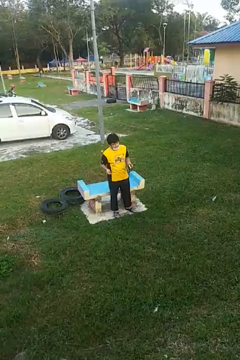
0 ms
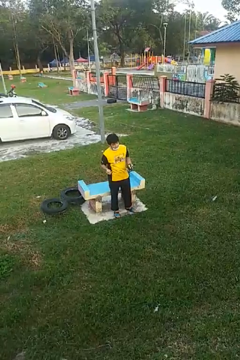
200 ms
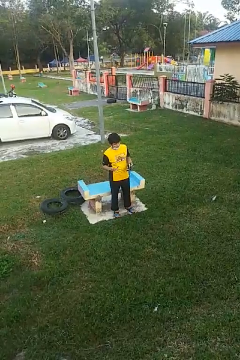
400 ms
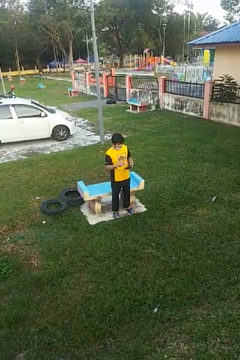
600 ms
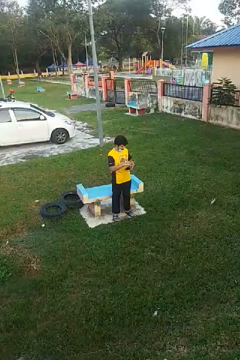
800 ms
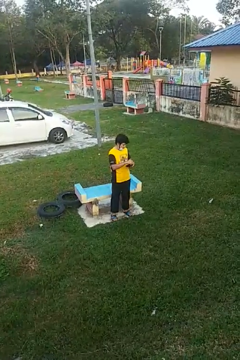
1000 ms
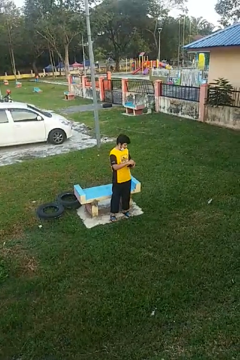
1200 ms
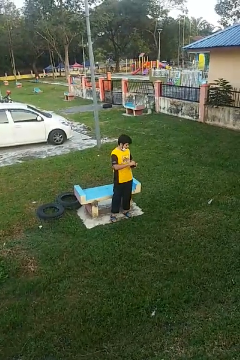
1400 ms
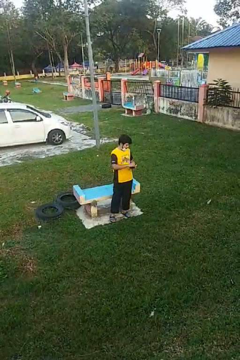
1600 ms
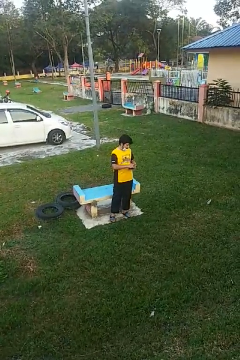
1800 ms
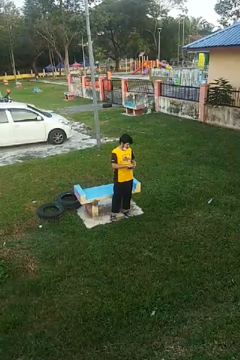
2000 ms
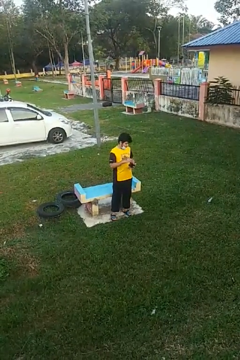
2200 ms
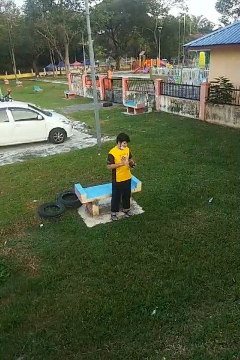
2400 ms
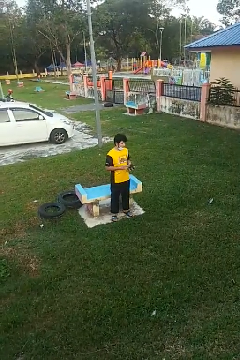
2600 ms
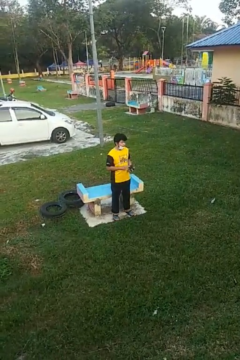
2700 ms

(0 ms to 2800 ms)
person puts object into purse

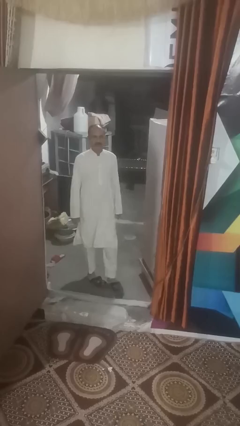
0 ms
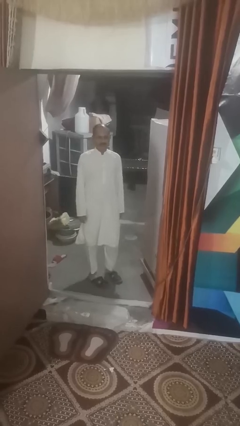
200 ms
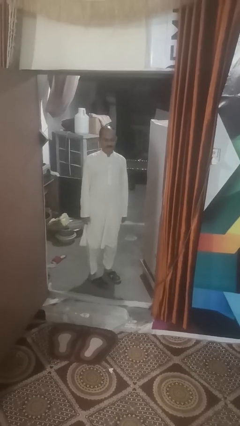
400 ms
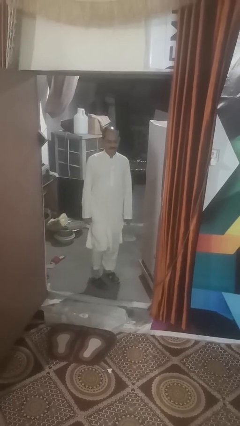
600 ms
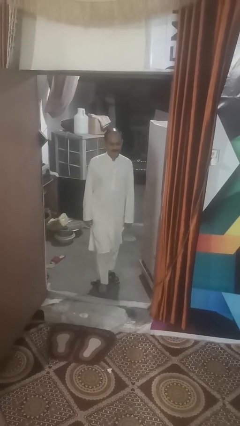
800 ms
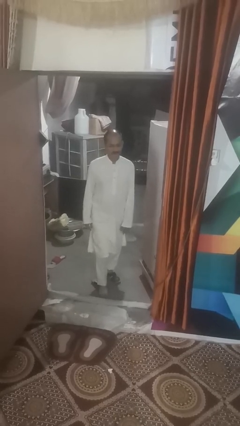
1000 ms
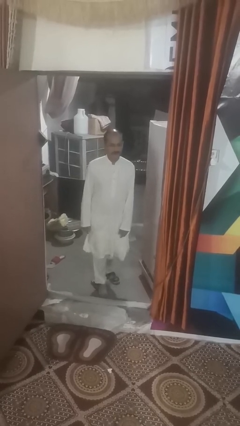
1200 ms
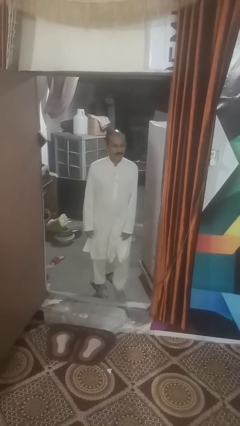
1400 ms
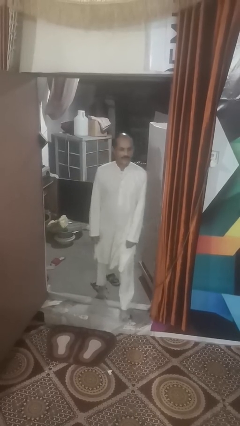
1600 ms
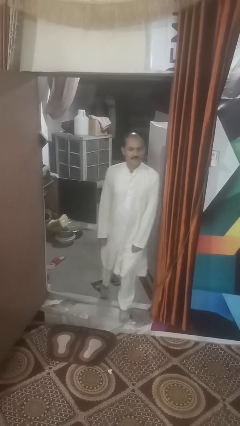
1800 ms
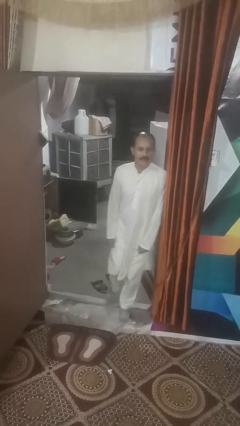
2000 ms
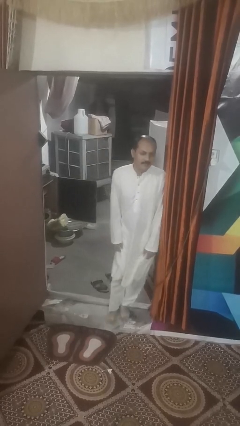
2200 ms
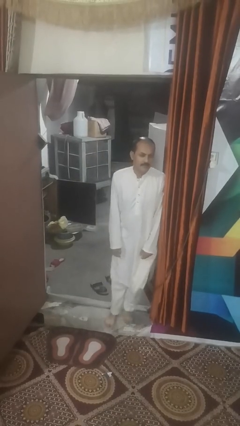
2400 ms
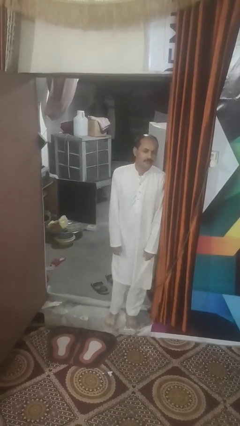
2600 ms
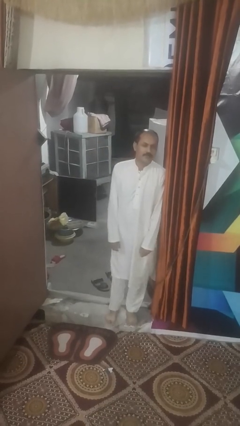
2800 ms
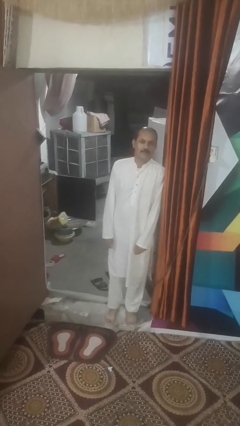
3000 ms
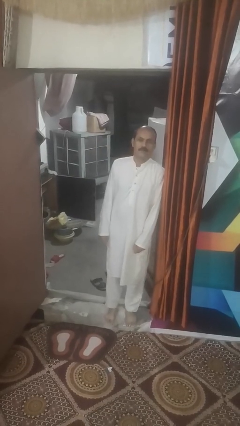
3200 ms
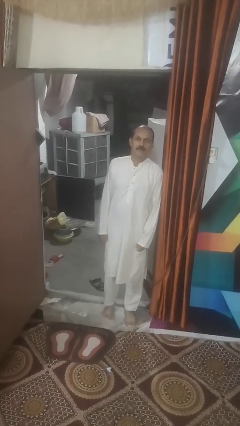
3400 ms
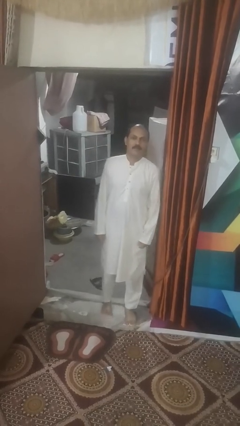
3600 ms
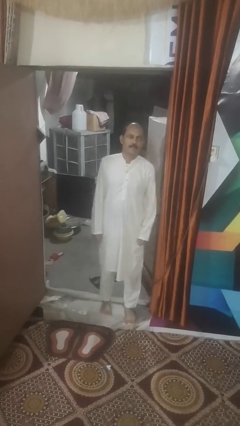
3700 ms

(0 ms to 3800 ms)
person bumps into wall

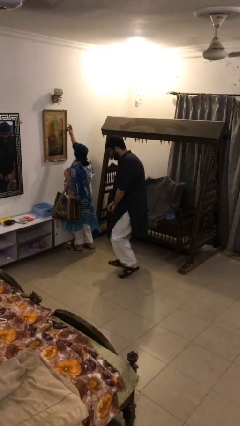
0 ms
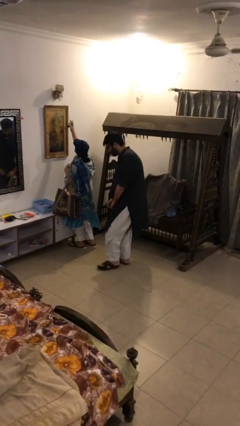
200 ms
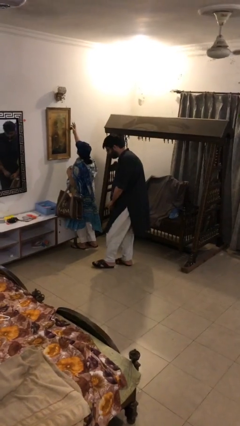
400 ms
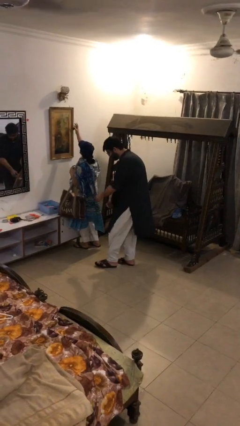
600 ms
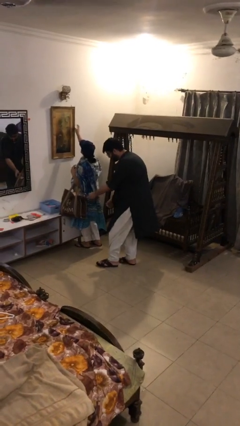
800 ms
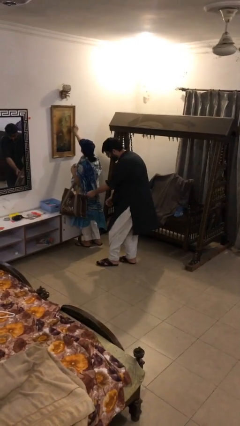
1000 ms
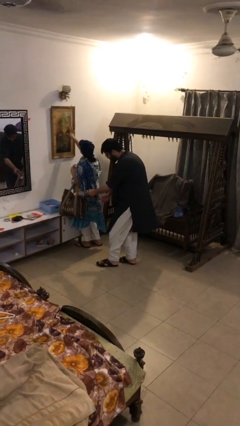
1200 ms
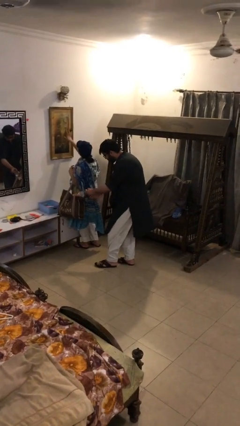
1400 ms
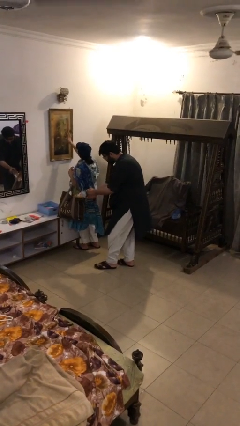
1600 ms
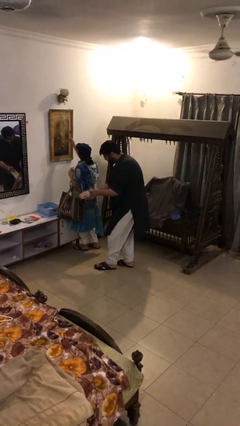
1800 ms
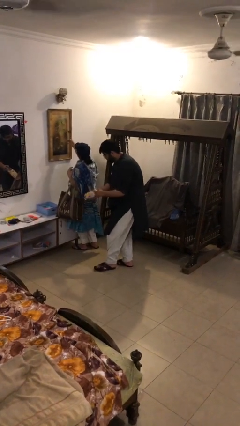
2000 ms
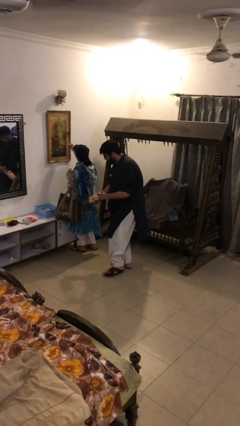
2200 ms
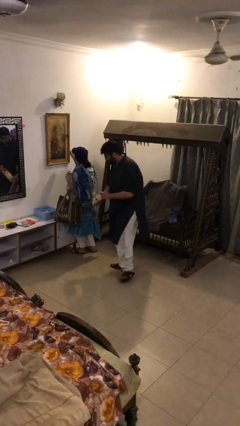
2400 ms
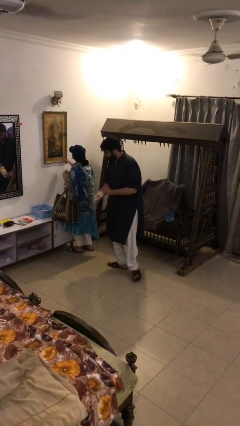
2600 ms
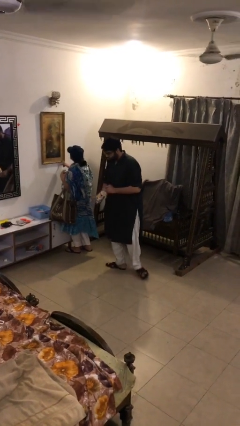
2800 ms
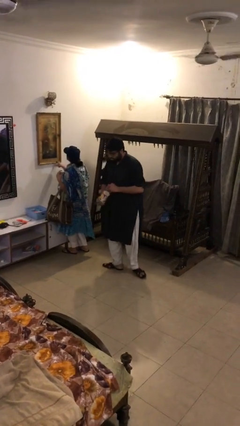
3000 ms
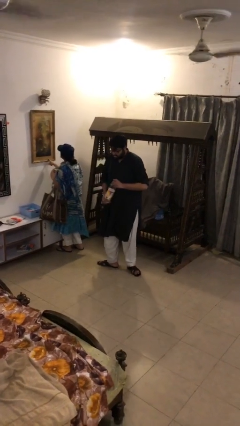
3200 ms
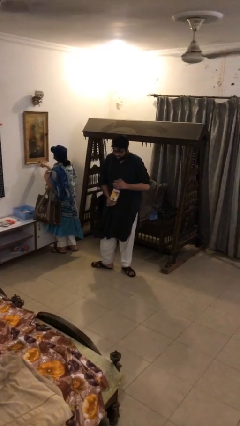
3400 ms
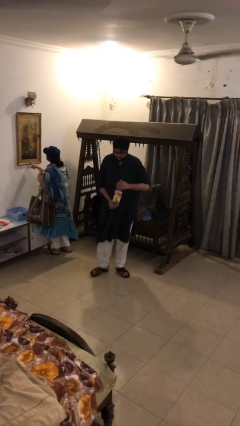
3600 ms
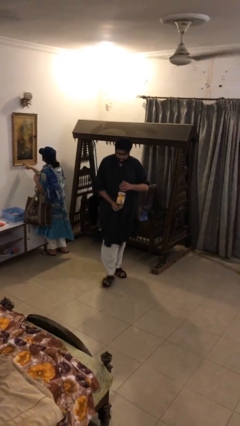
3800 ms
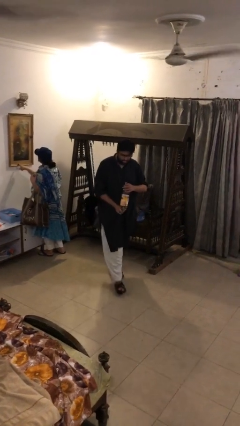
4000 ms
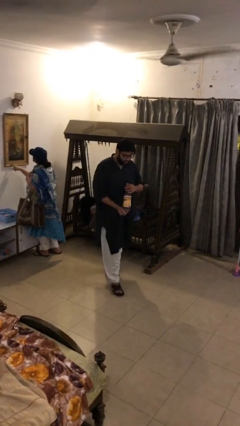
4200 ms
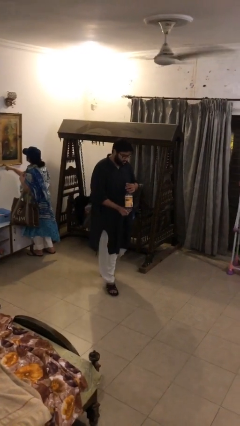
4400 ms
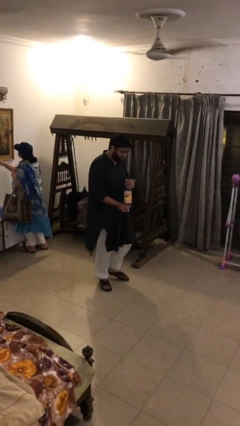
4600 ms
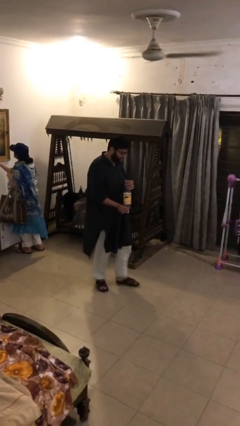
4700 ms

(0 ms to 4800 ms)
person steals object from person

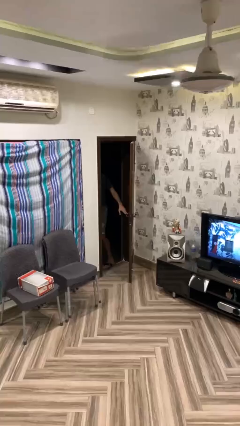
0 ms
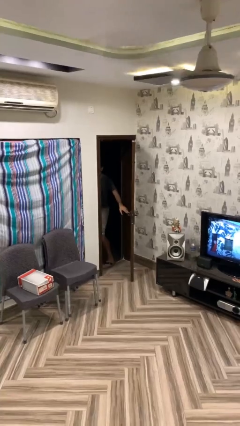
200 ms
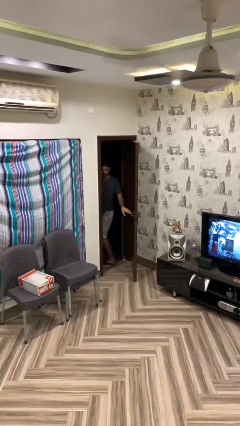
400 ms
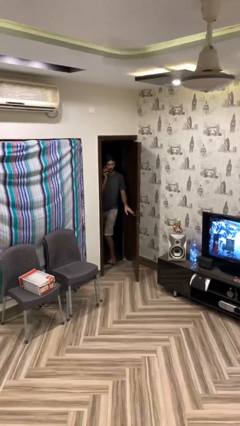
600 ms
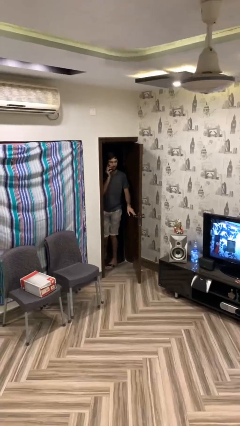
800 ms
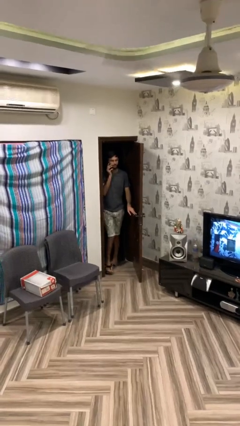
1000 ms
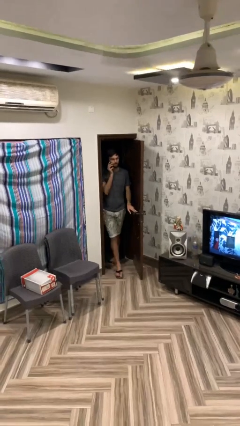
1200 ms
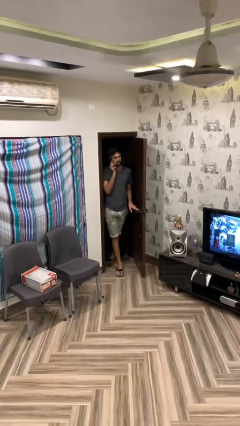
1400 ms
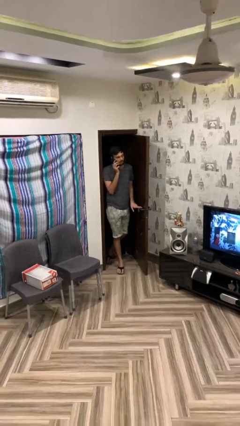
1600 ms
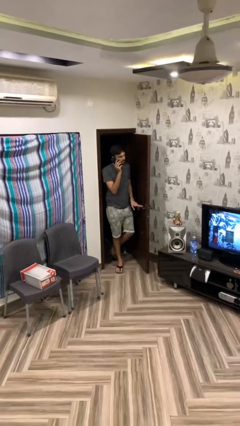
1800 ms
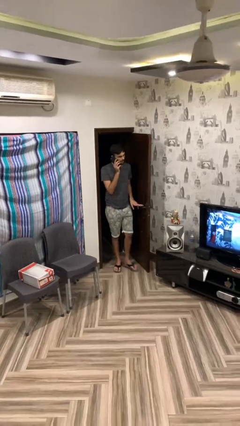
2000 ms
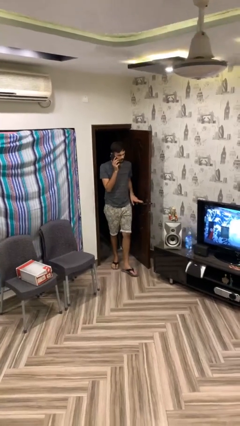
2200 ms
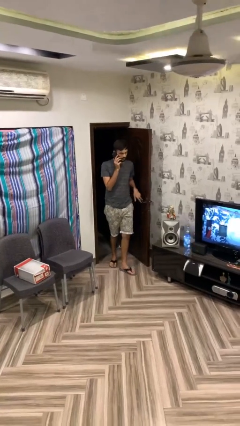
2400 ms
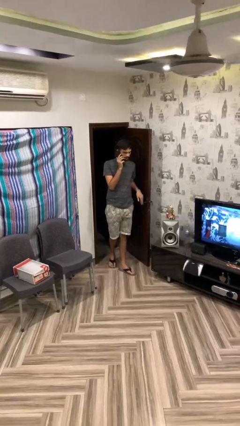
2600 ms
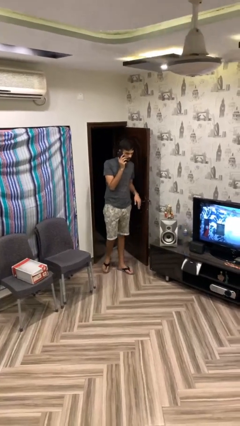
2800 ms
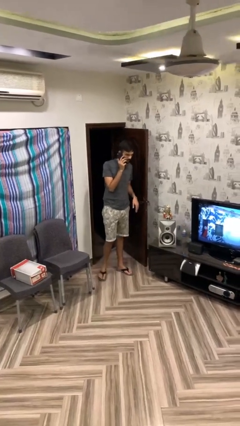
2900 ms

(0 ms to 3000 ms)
person enters scene through structure

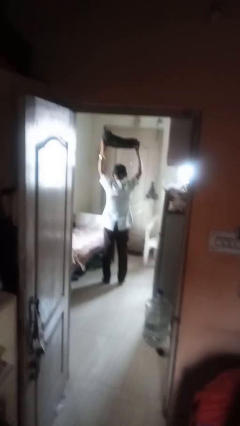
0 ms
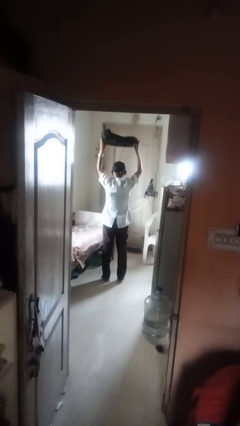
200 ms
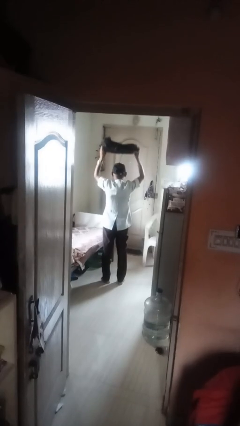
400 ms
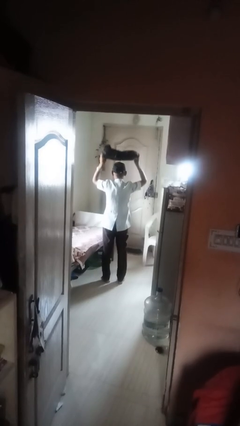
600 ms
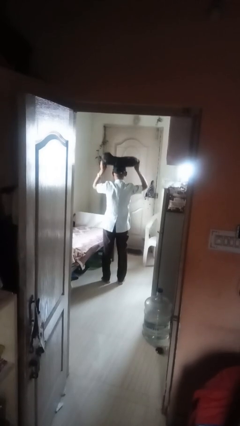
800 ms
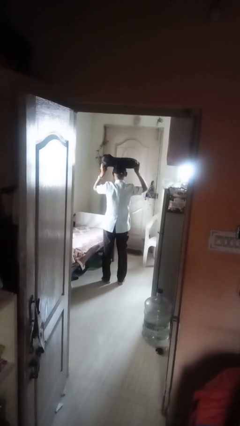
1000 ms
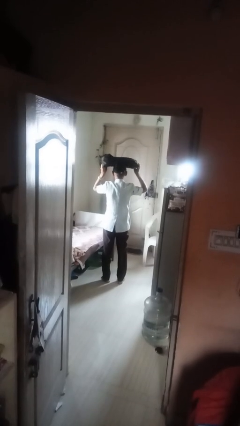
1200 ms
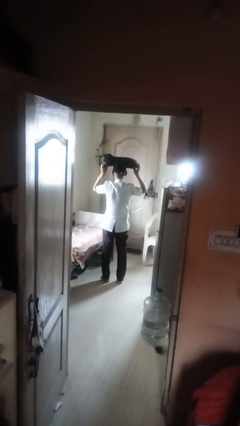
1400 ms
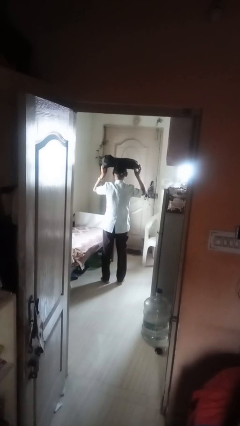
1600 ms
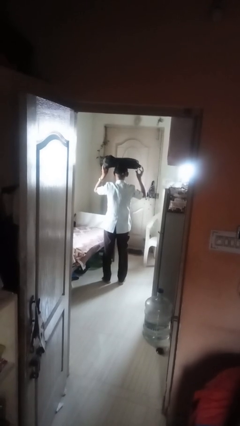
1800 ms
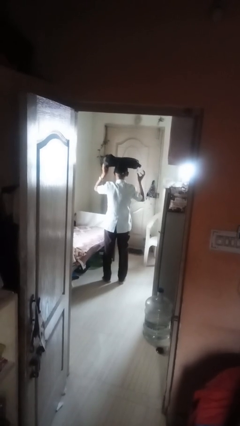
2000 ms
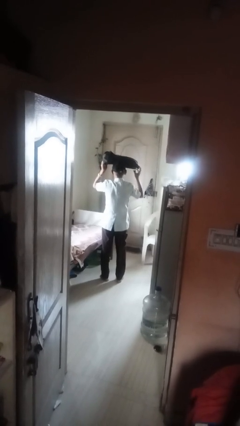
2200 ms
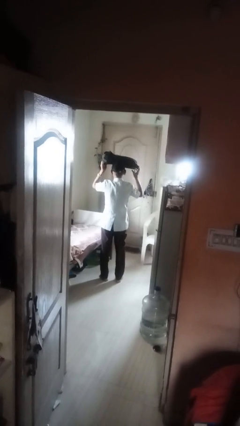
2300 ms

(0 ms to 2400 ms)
person holds object above head

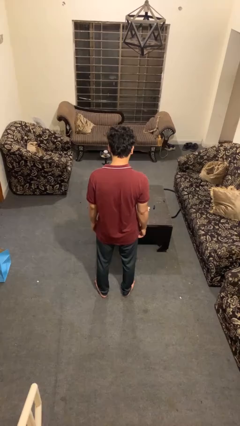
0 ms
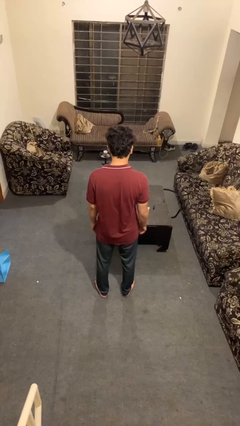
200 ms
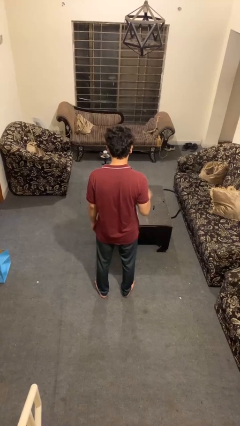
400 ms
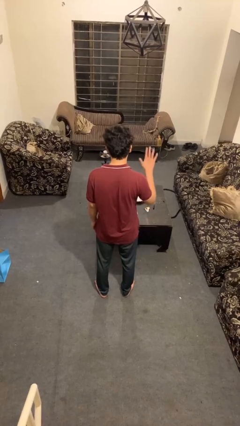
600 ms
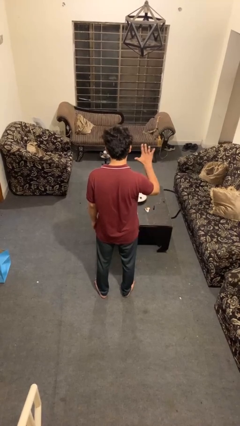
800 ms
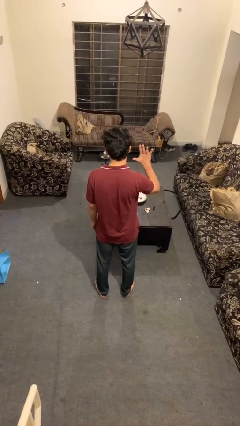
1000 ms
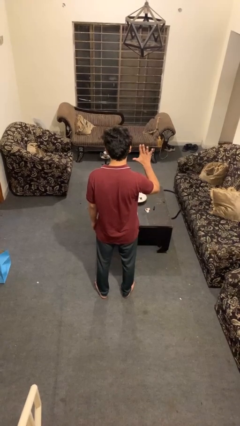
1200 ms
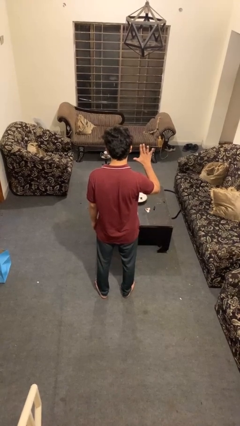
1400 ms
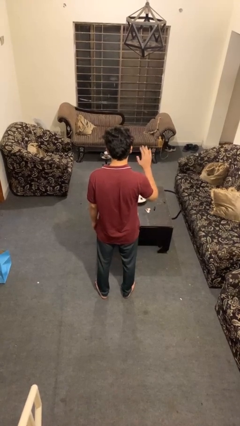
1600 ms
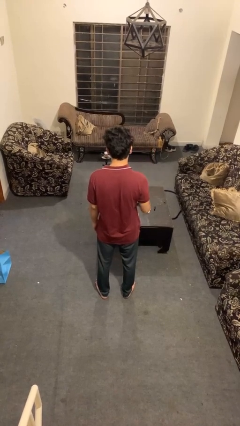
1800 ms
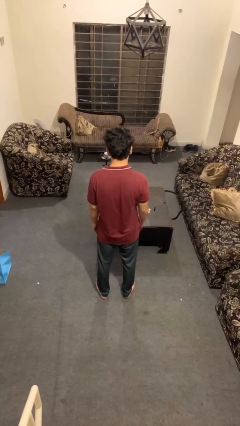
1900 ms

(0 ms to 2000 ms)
person gestures number five
